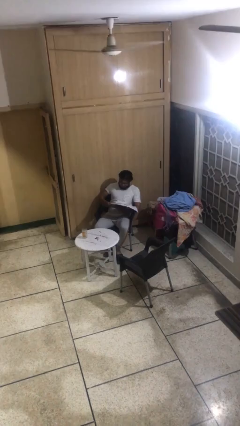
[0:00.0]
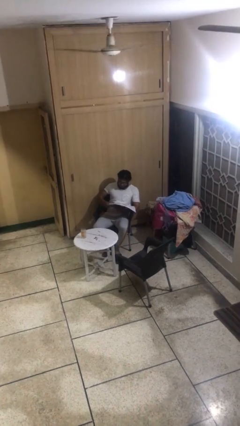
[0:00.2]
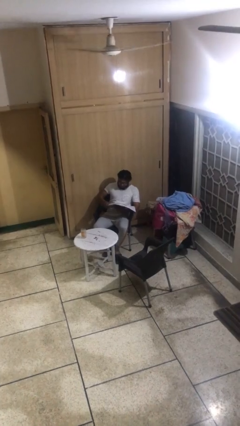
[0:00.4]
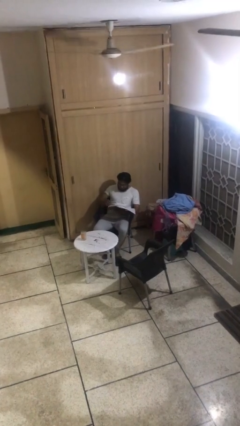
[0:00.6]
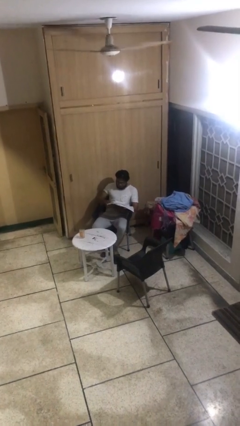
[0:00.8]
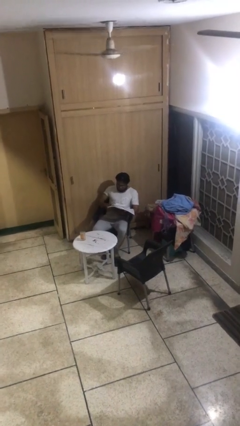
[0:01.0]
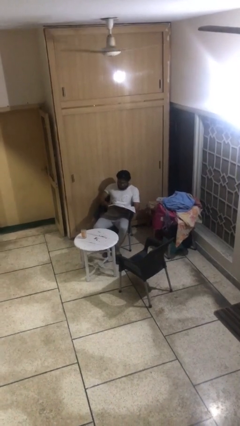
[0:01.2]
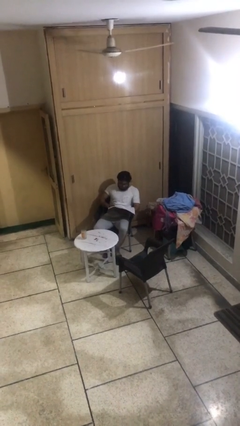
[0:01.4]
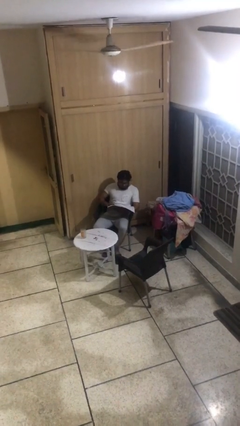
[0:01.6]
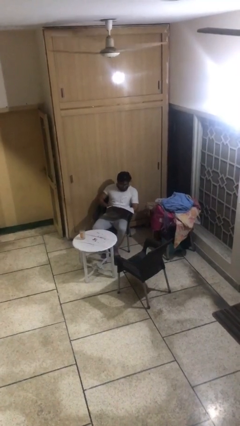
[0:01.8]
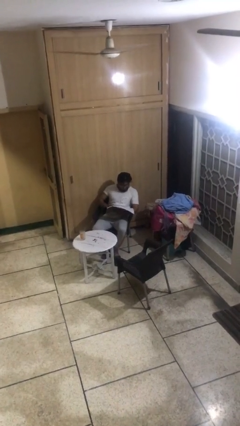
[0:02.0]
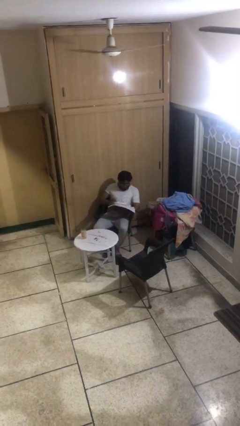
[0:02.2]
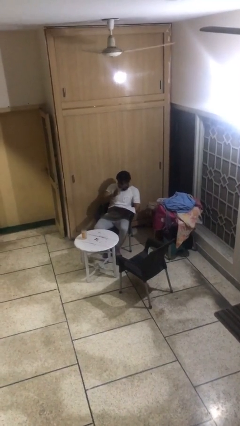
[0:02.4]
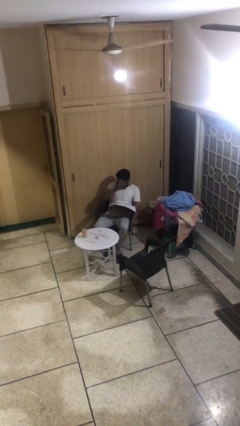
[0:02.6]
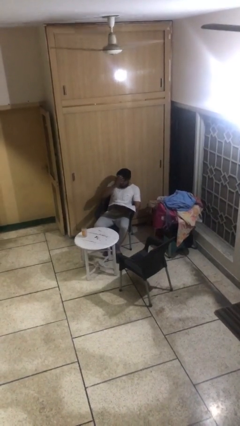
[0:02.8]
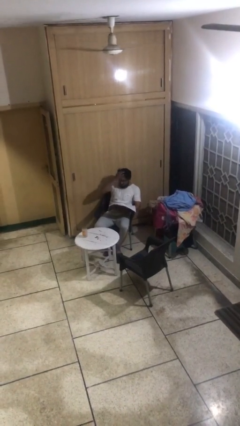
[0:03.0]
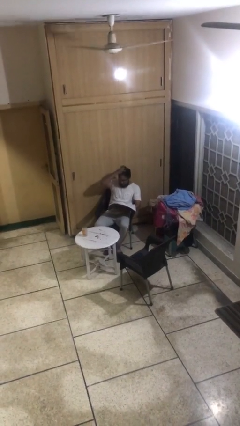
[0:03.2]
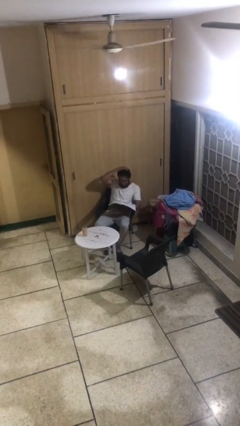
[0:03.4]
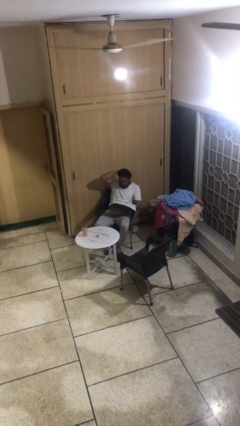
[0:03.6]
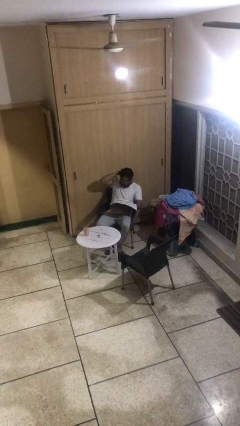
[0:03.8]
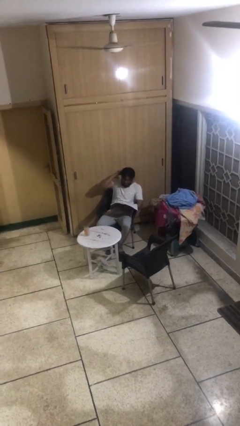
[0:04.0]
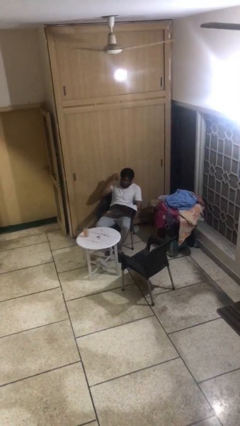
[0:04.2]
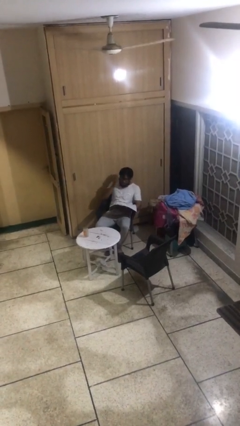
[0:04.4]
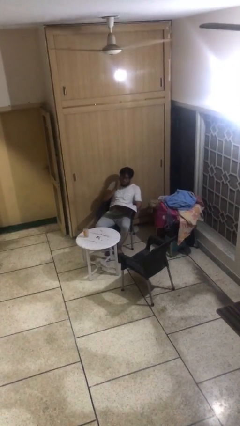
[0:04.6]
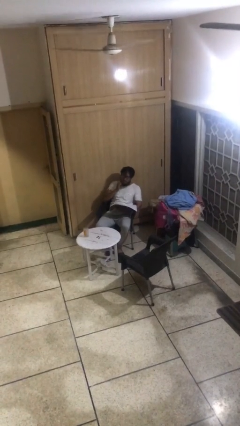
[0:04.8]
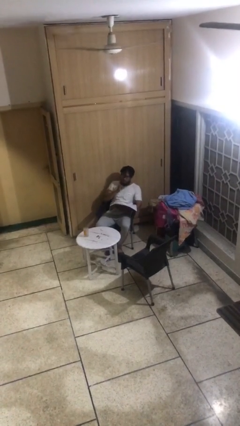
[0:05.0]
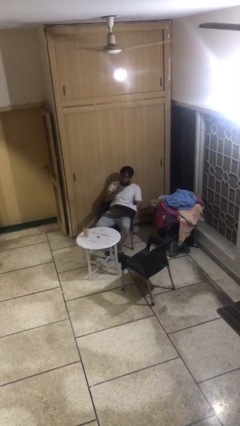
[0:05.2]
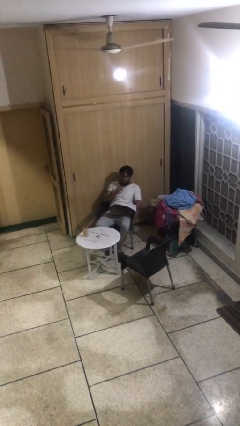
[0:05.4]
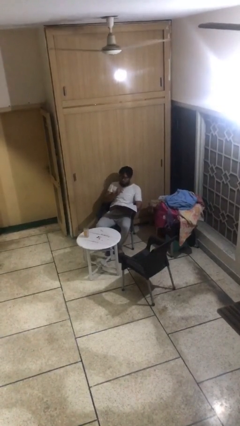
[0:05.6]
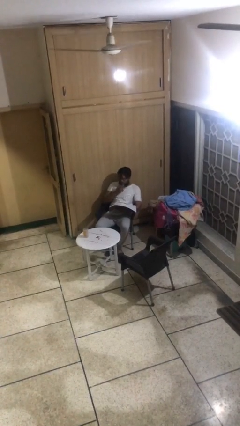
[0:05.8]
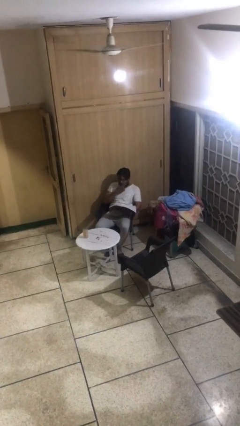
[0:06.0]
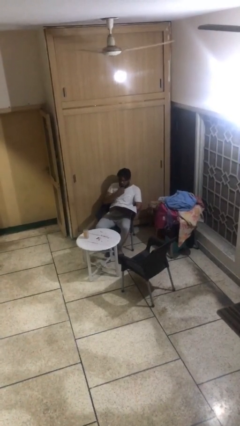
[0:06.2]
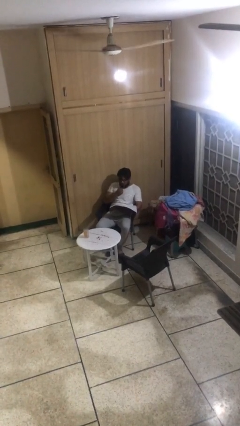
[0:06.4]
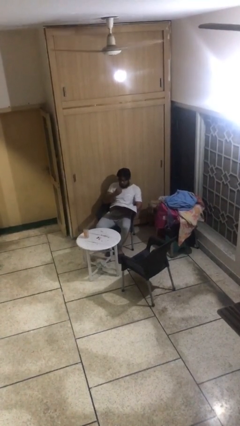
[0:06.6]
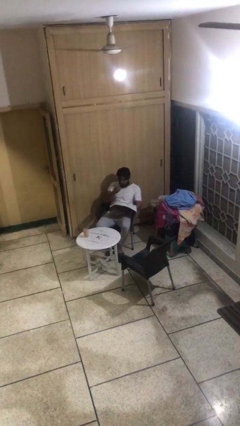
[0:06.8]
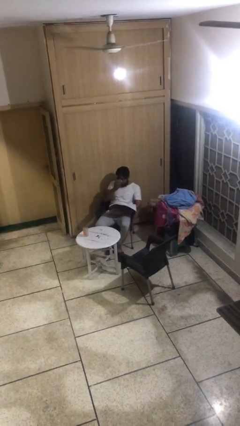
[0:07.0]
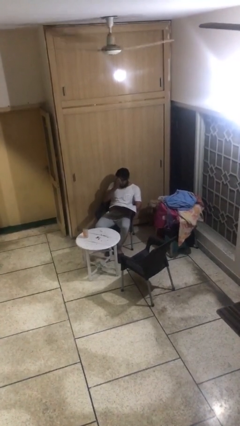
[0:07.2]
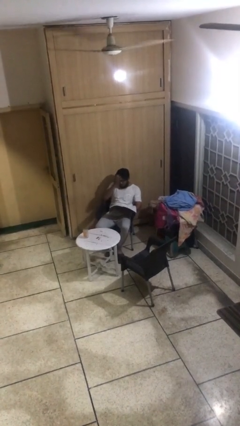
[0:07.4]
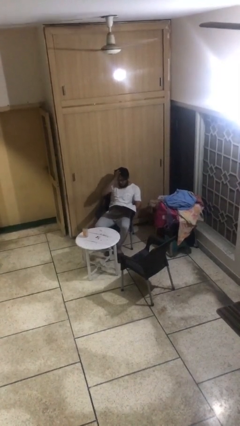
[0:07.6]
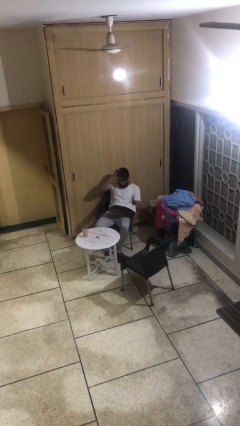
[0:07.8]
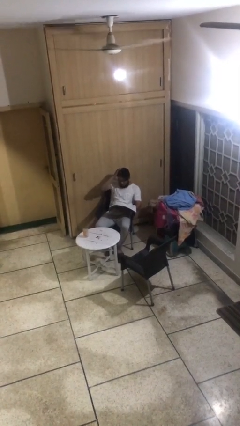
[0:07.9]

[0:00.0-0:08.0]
person reads document

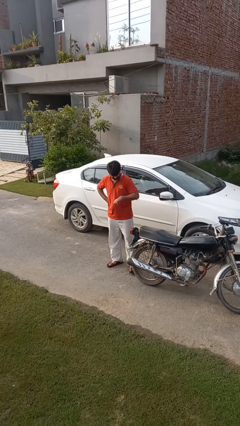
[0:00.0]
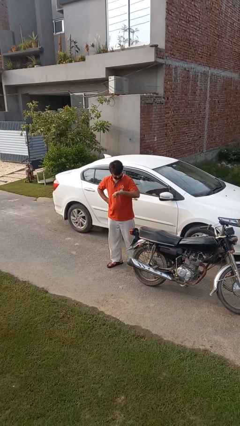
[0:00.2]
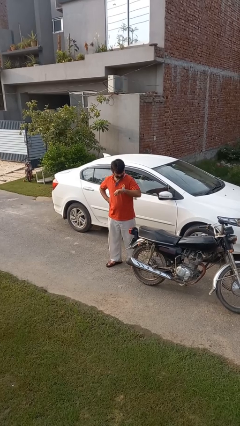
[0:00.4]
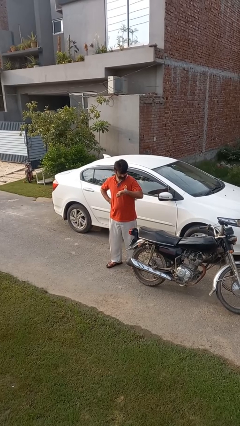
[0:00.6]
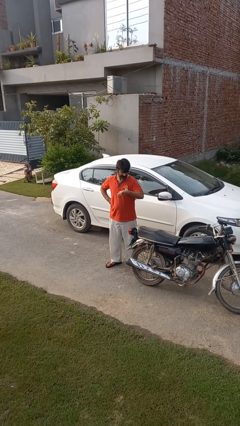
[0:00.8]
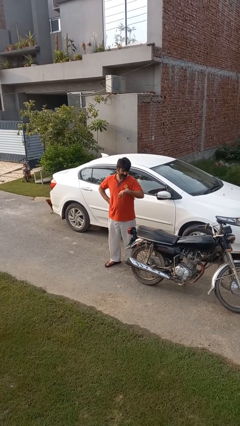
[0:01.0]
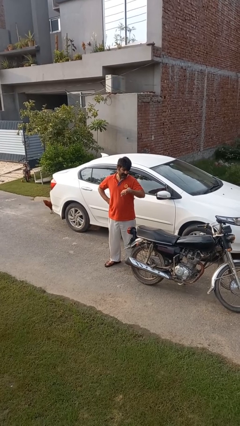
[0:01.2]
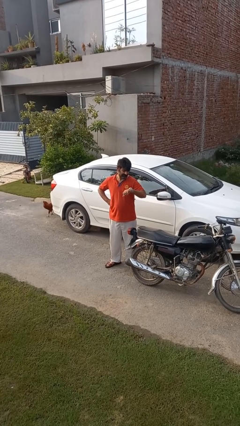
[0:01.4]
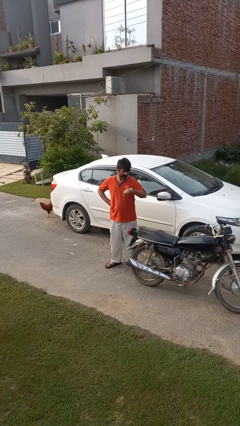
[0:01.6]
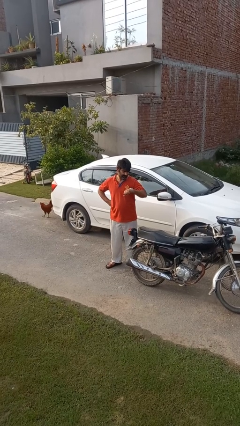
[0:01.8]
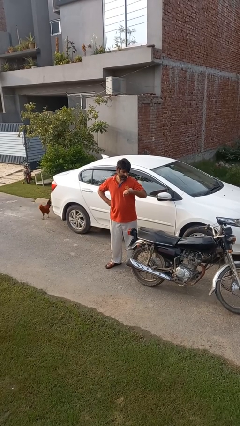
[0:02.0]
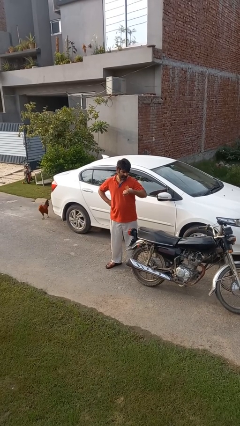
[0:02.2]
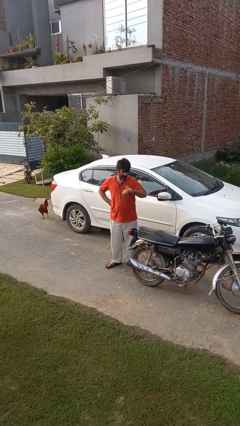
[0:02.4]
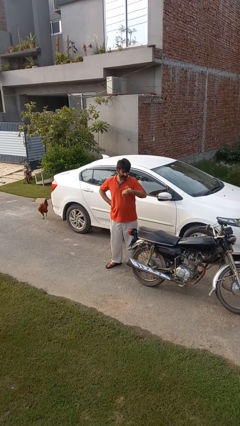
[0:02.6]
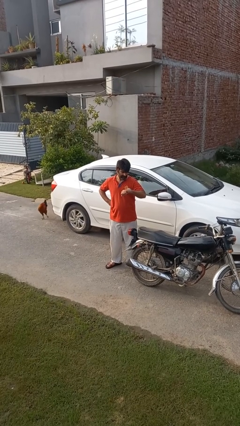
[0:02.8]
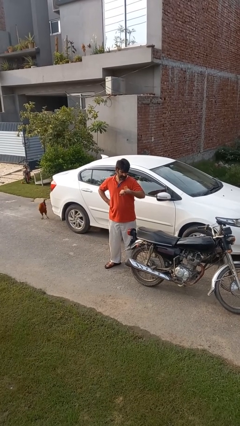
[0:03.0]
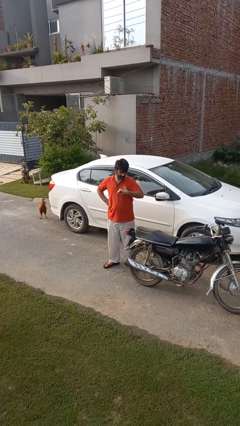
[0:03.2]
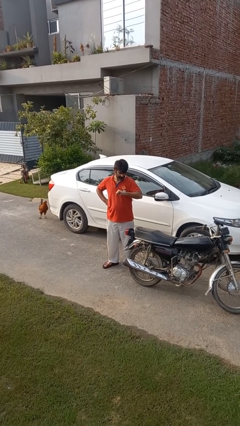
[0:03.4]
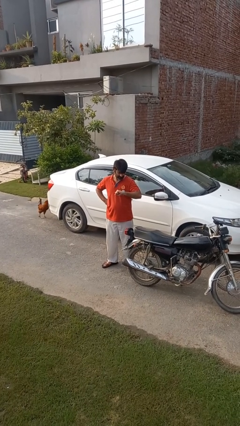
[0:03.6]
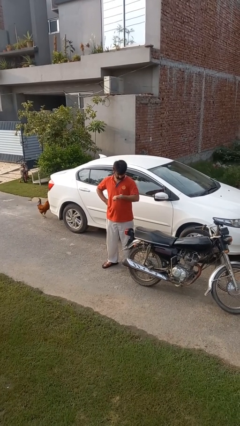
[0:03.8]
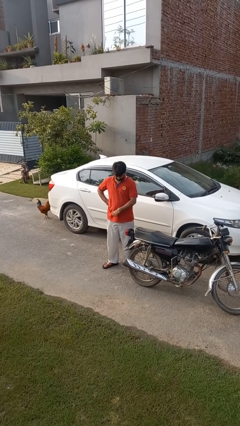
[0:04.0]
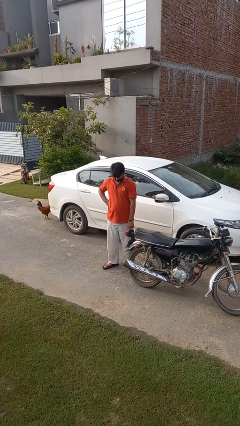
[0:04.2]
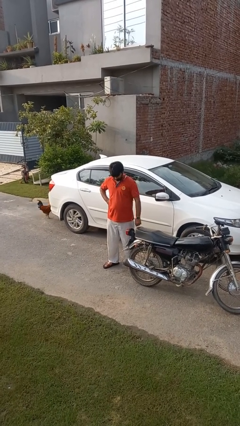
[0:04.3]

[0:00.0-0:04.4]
person looks at wristwatch

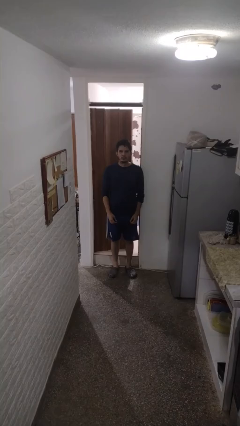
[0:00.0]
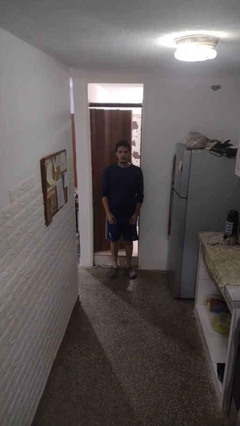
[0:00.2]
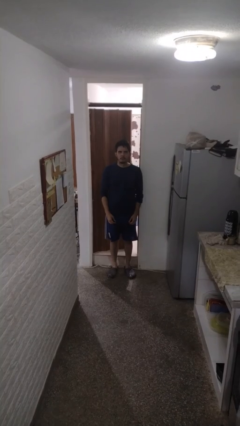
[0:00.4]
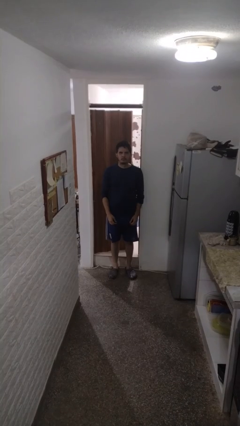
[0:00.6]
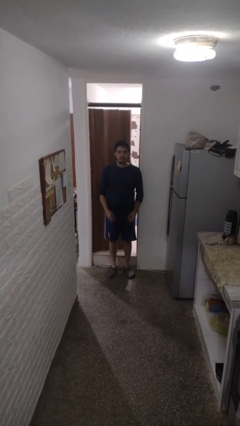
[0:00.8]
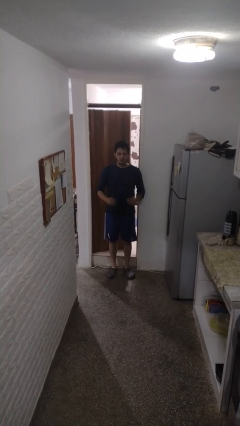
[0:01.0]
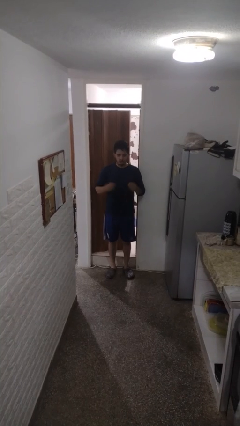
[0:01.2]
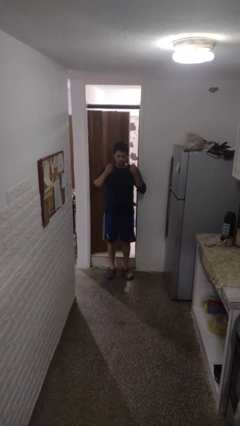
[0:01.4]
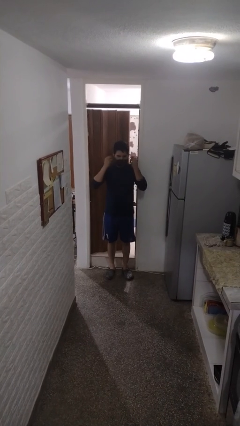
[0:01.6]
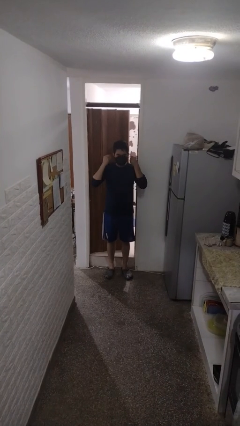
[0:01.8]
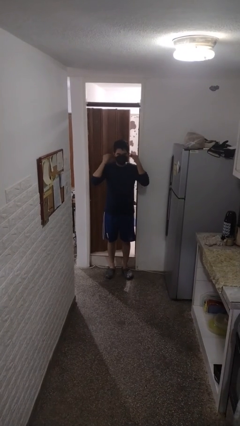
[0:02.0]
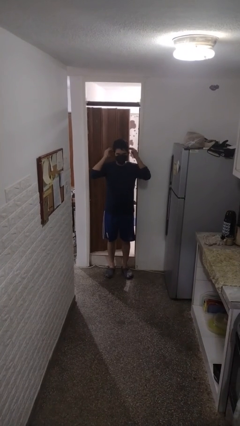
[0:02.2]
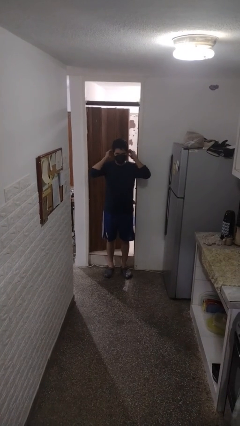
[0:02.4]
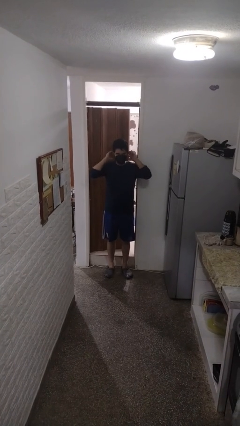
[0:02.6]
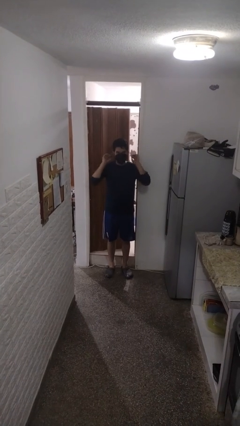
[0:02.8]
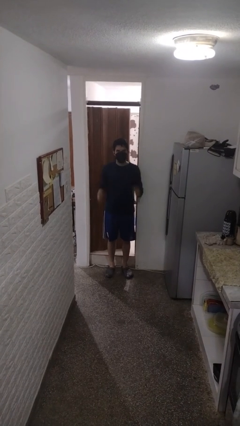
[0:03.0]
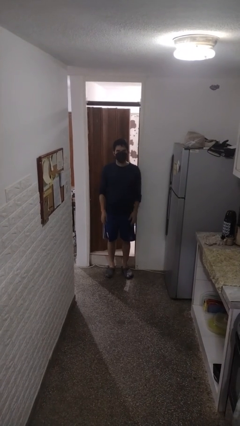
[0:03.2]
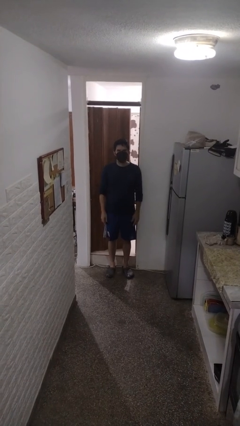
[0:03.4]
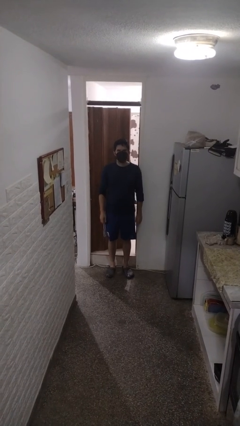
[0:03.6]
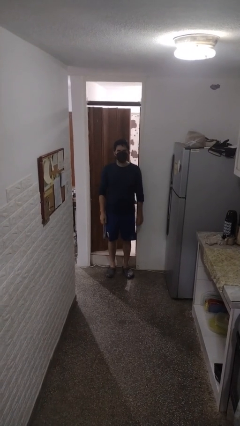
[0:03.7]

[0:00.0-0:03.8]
person puts on facemask

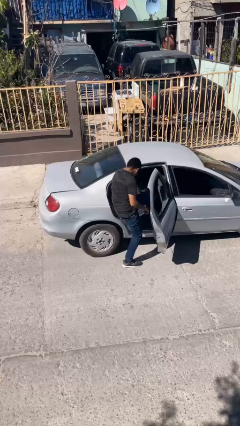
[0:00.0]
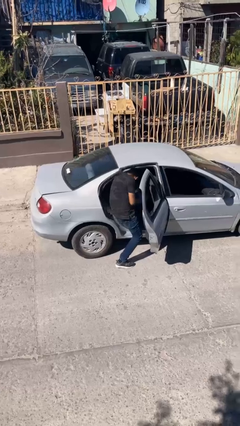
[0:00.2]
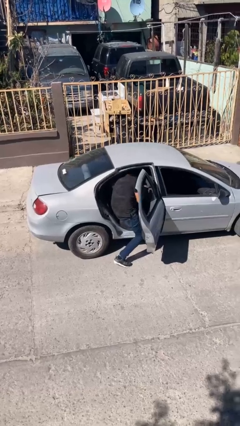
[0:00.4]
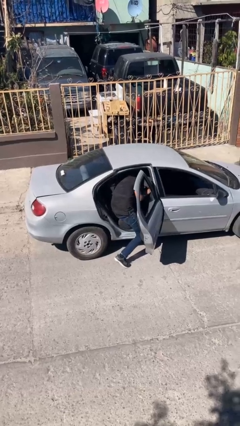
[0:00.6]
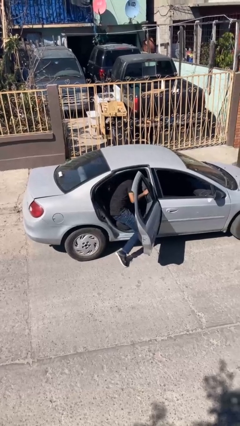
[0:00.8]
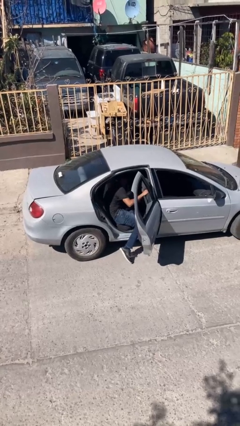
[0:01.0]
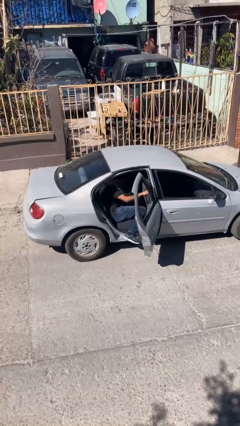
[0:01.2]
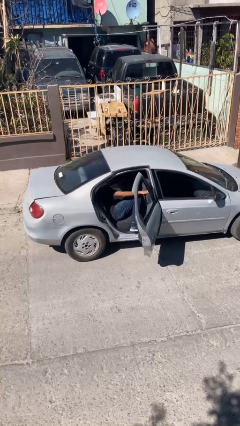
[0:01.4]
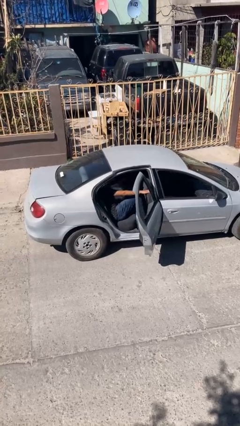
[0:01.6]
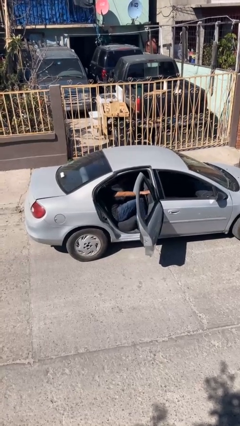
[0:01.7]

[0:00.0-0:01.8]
person enters car
